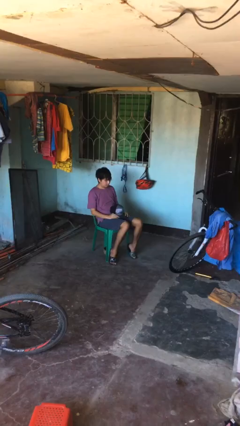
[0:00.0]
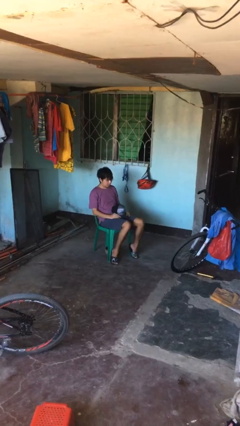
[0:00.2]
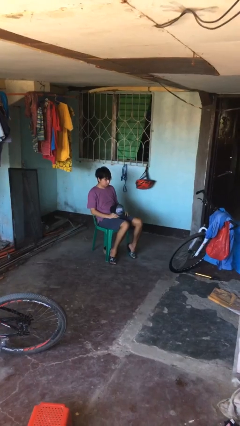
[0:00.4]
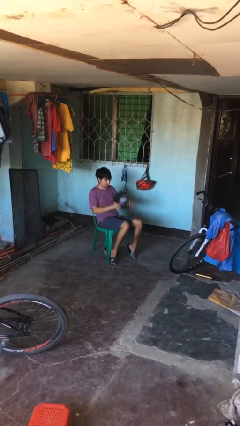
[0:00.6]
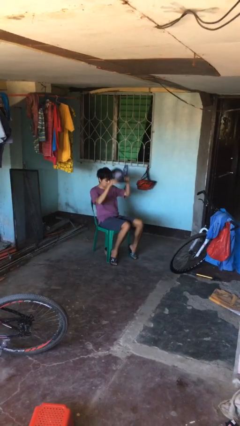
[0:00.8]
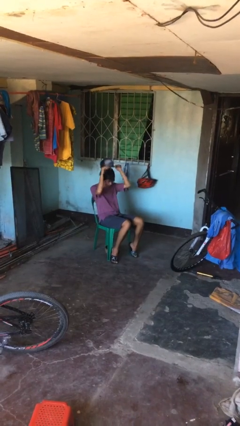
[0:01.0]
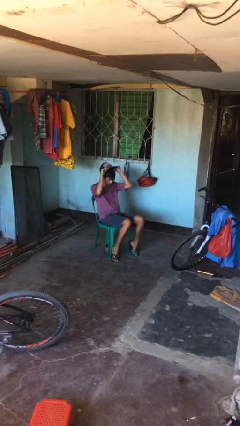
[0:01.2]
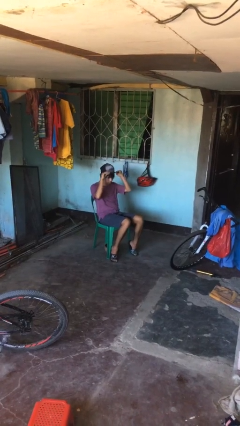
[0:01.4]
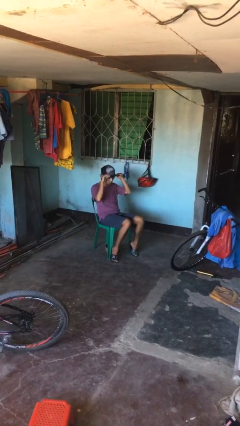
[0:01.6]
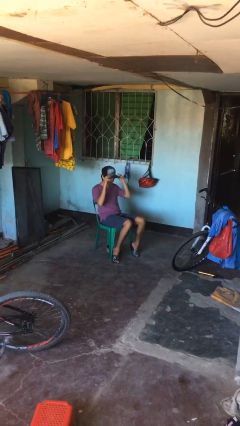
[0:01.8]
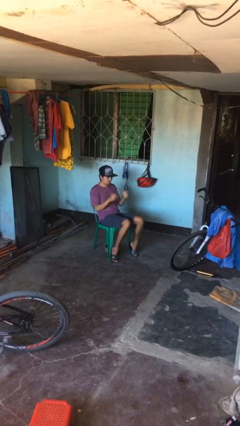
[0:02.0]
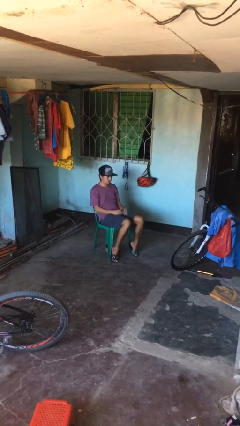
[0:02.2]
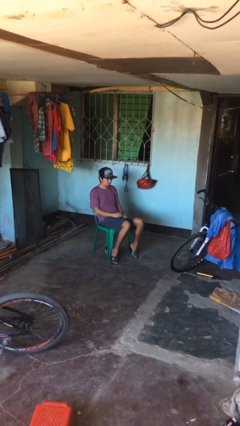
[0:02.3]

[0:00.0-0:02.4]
person puts on hat

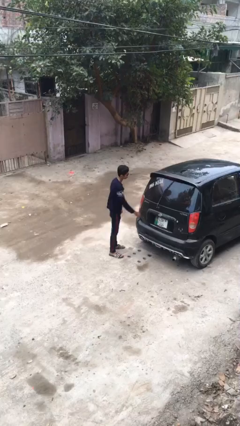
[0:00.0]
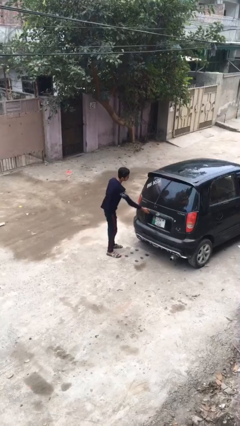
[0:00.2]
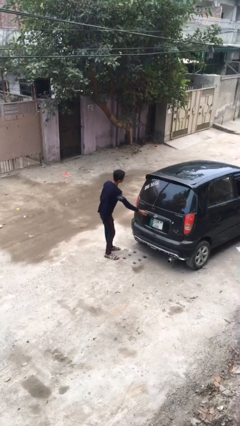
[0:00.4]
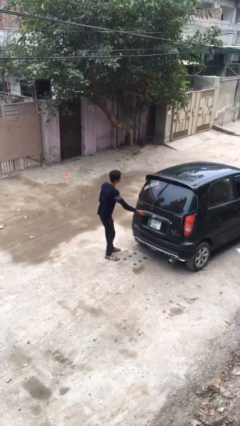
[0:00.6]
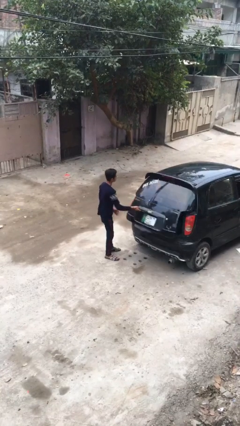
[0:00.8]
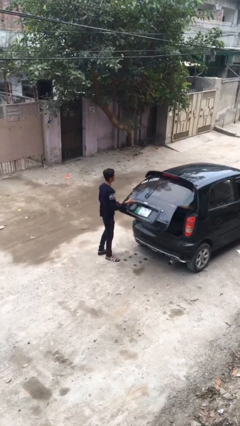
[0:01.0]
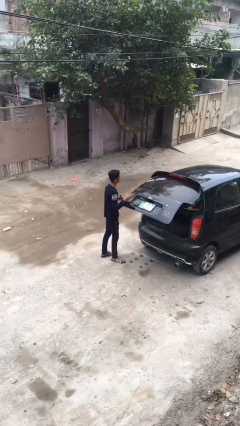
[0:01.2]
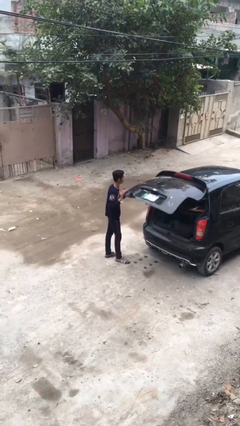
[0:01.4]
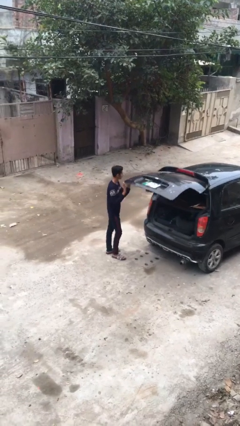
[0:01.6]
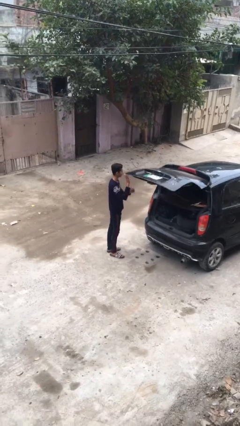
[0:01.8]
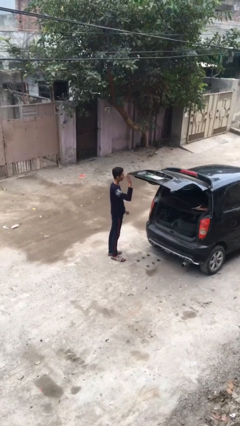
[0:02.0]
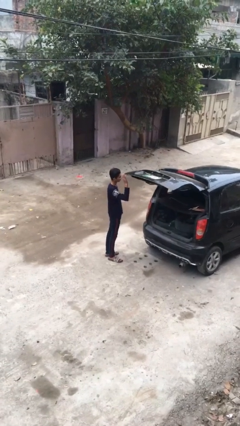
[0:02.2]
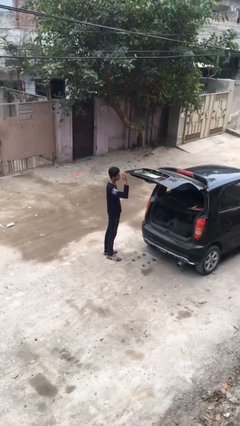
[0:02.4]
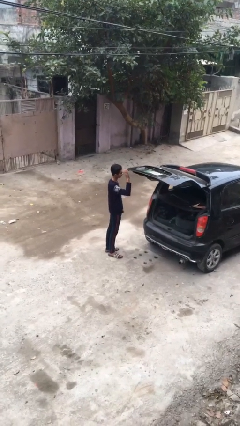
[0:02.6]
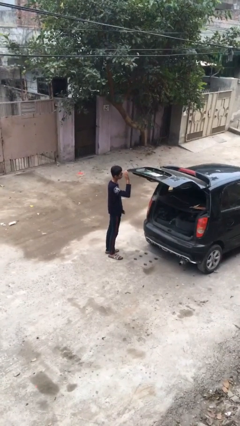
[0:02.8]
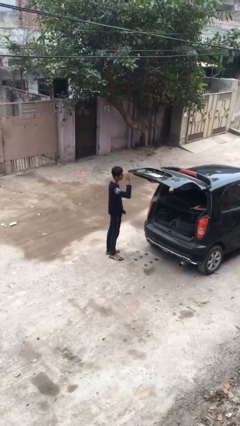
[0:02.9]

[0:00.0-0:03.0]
person opens car trunk

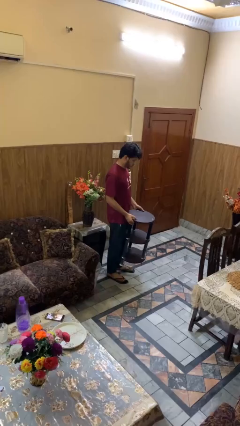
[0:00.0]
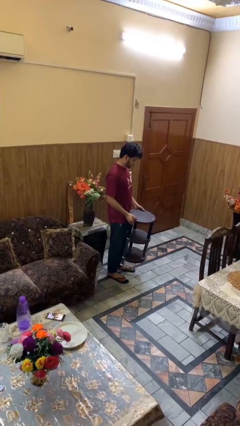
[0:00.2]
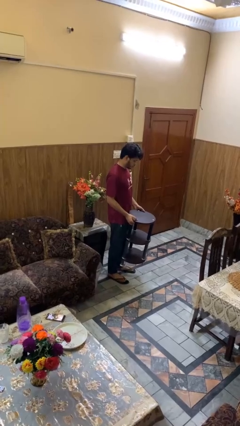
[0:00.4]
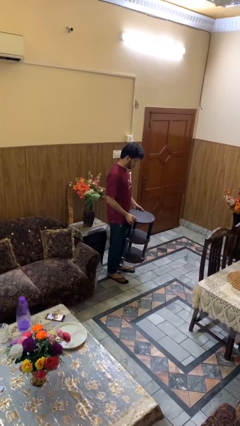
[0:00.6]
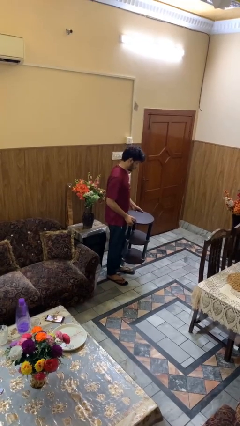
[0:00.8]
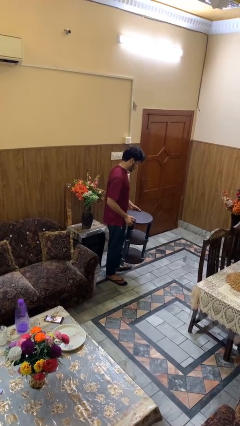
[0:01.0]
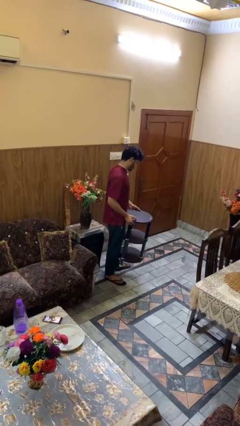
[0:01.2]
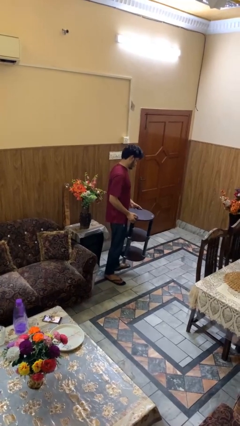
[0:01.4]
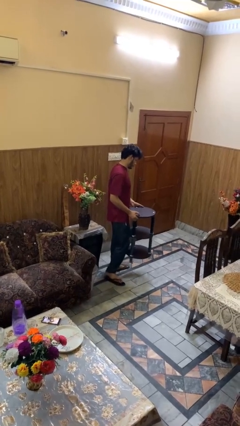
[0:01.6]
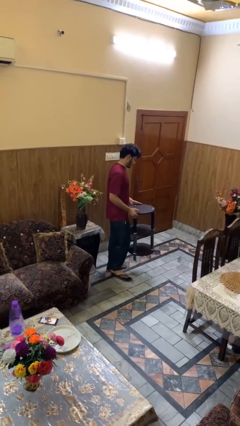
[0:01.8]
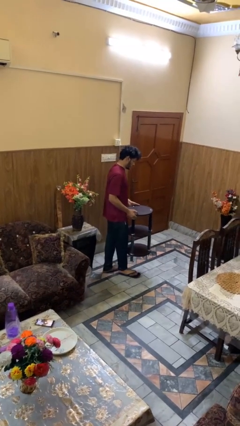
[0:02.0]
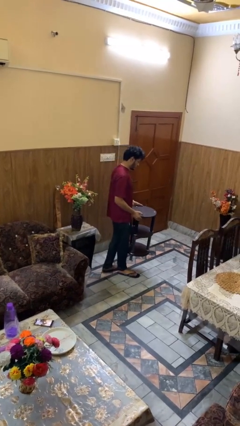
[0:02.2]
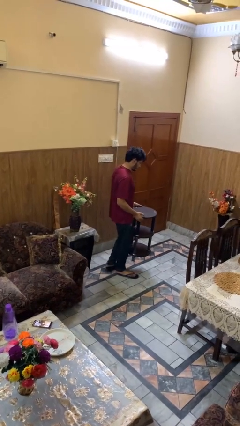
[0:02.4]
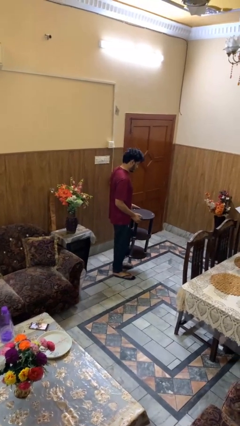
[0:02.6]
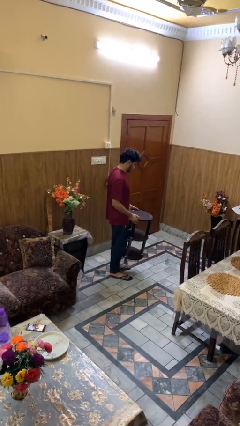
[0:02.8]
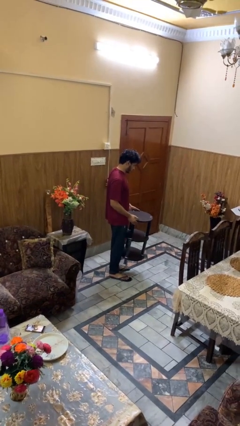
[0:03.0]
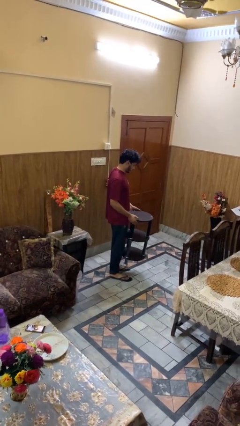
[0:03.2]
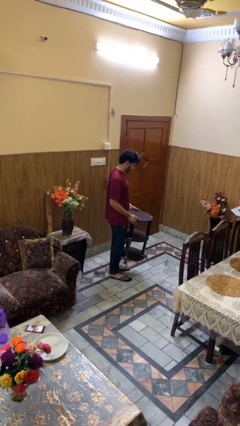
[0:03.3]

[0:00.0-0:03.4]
person carries furniture

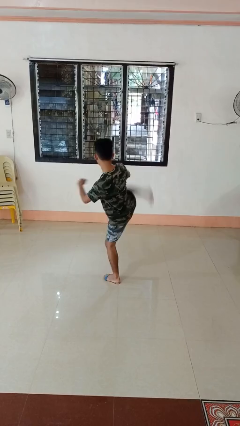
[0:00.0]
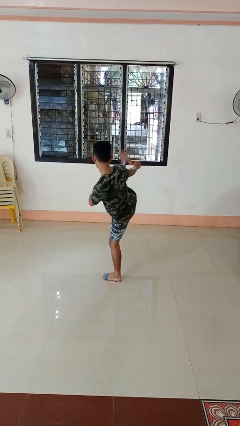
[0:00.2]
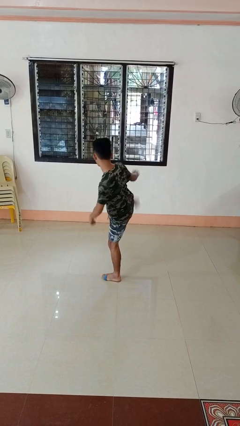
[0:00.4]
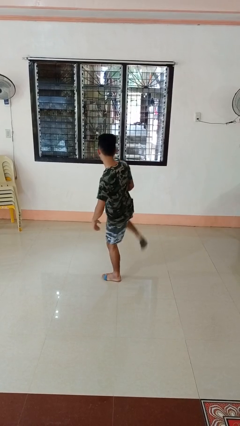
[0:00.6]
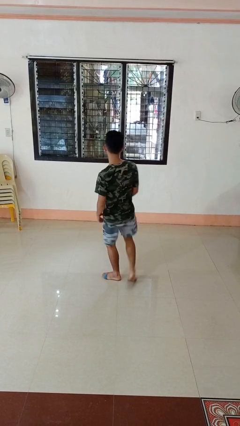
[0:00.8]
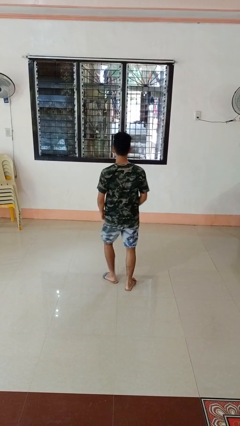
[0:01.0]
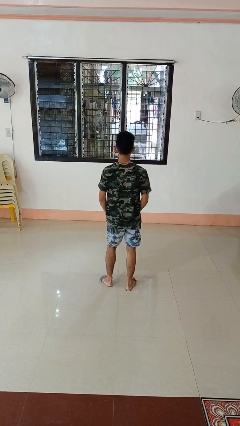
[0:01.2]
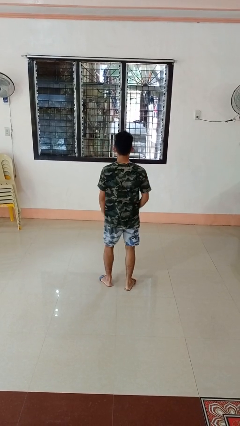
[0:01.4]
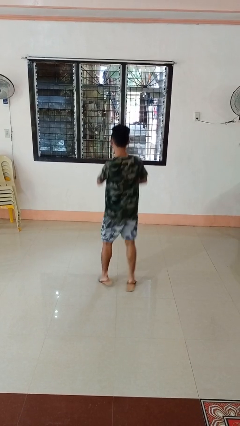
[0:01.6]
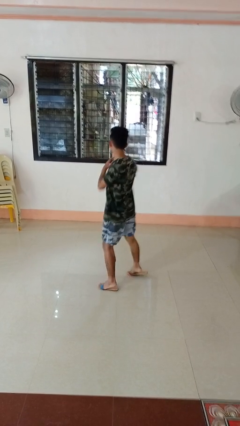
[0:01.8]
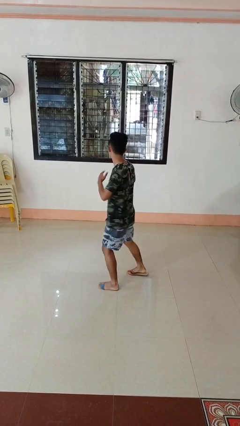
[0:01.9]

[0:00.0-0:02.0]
person karate kicks

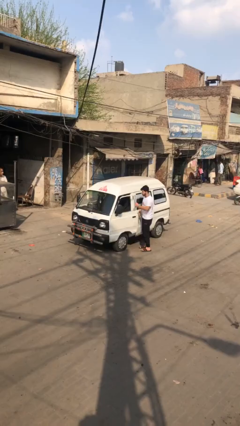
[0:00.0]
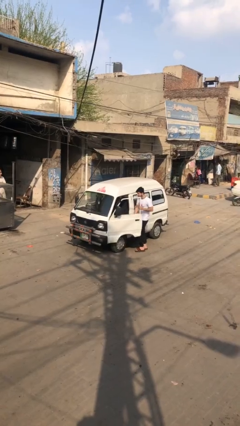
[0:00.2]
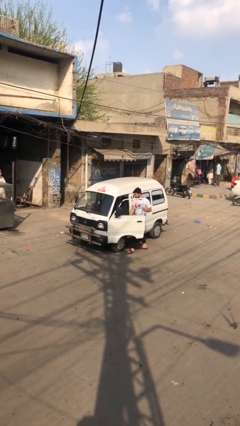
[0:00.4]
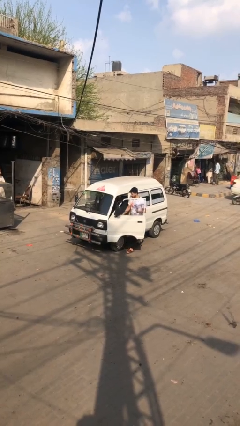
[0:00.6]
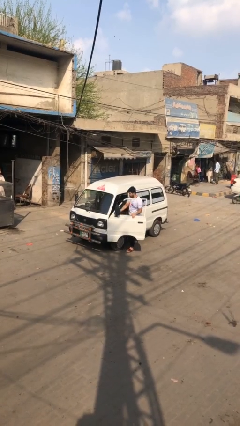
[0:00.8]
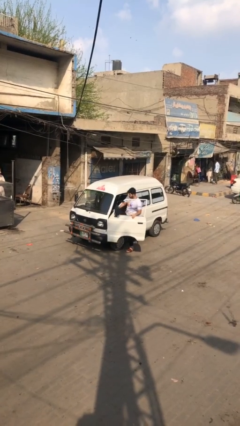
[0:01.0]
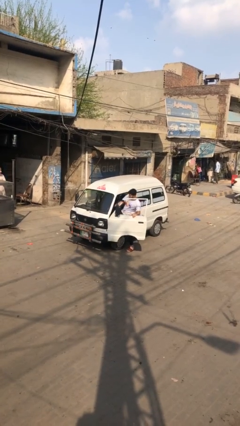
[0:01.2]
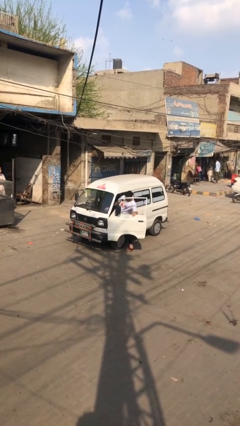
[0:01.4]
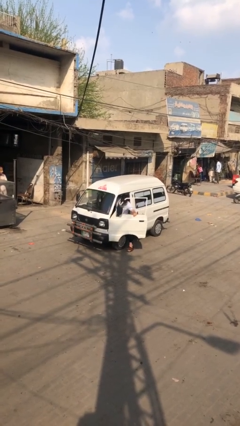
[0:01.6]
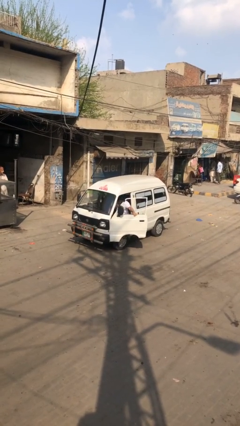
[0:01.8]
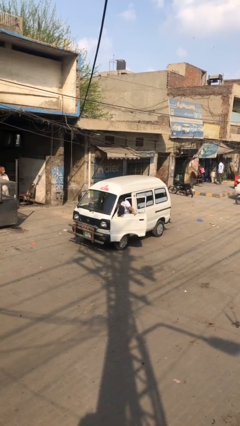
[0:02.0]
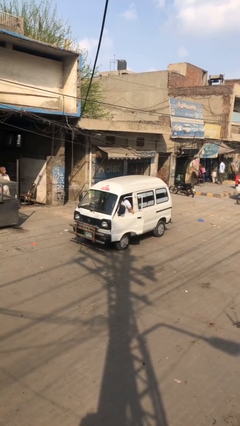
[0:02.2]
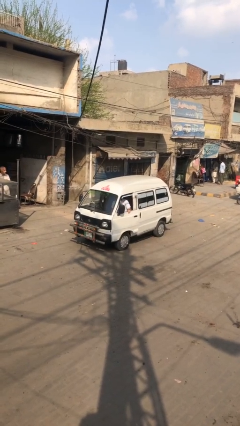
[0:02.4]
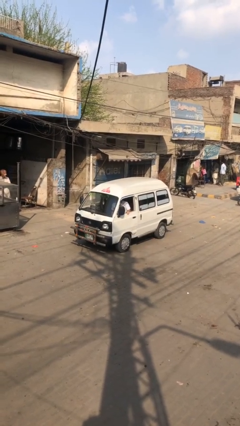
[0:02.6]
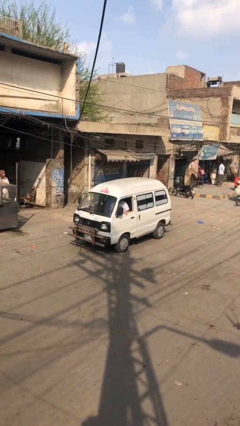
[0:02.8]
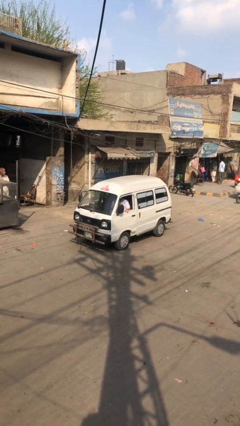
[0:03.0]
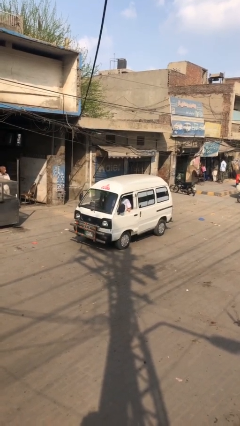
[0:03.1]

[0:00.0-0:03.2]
car picks up person

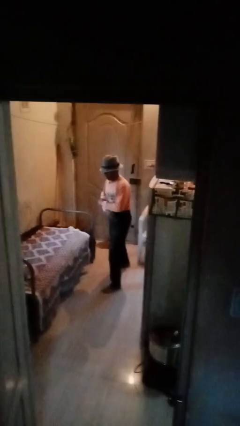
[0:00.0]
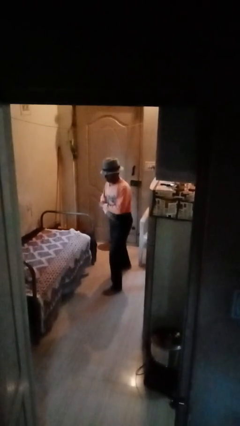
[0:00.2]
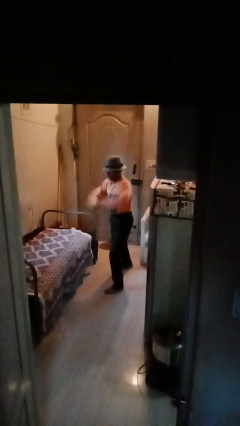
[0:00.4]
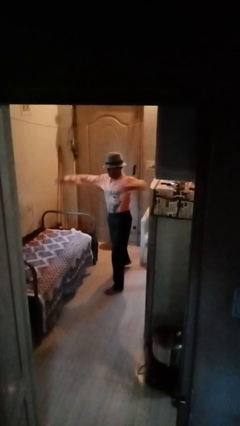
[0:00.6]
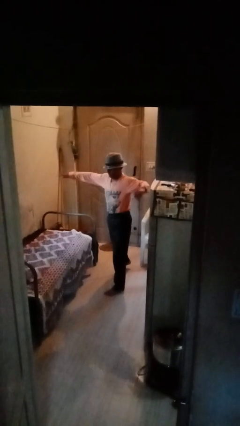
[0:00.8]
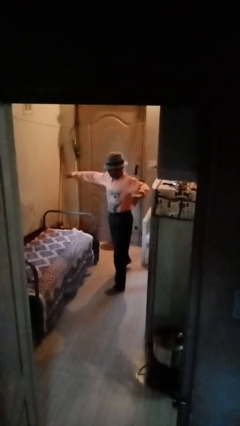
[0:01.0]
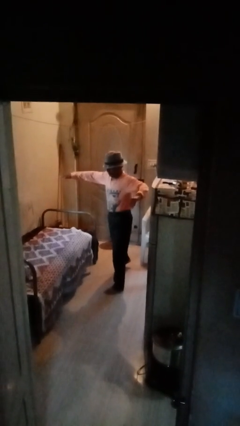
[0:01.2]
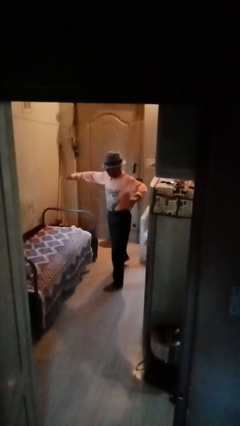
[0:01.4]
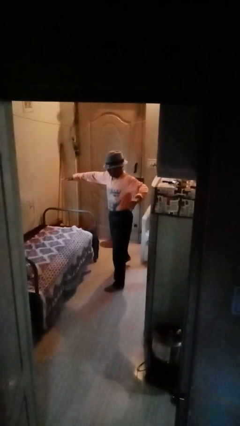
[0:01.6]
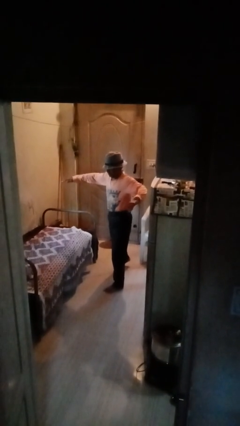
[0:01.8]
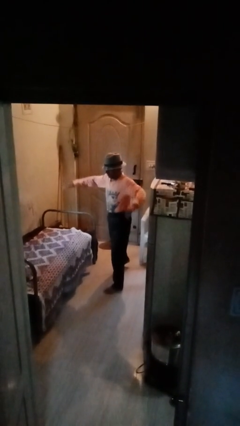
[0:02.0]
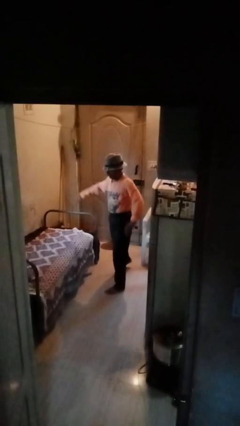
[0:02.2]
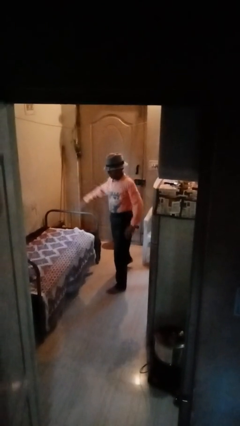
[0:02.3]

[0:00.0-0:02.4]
person karate chop

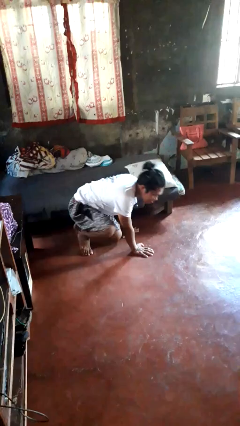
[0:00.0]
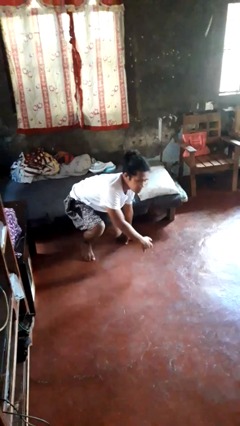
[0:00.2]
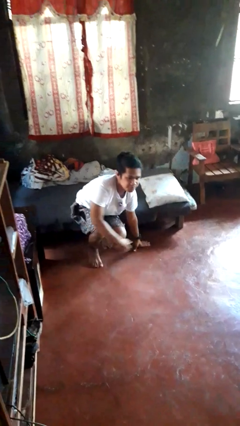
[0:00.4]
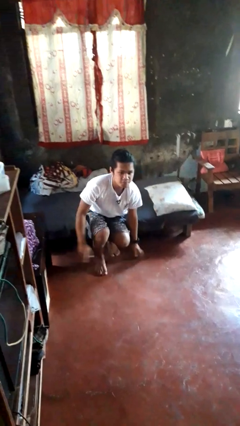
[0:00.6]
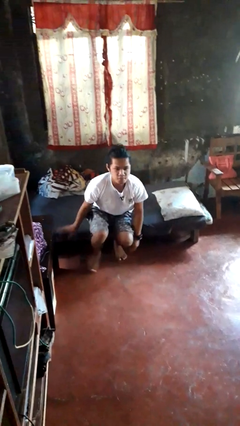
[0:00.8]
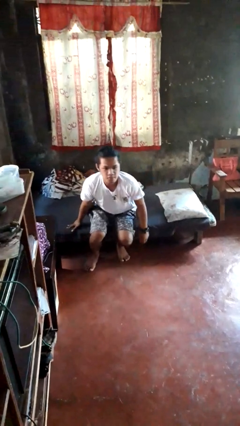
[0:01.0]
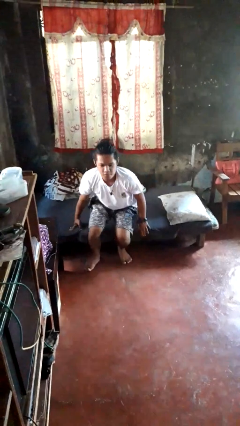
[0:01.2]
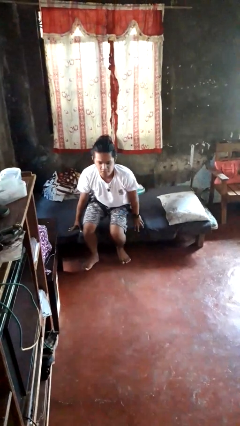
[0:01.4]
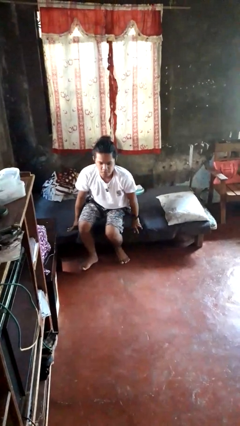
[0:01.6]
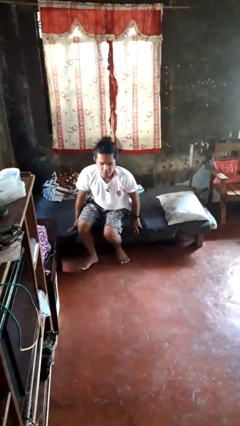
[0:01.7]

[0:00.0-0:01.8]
person stands up from floor
